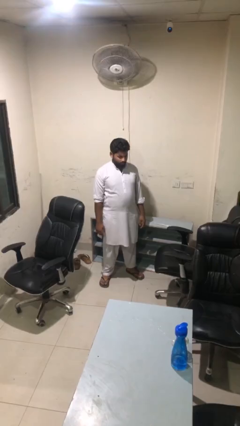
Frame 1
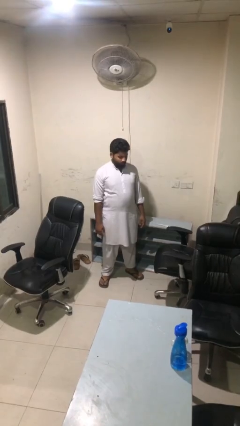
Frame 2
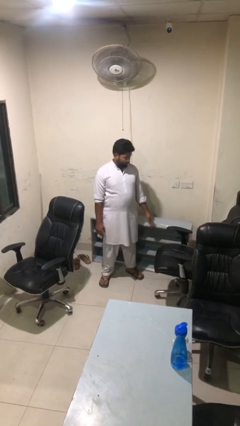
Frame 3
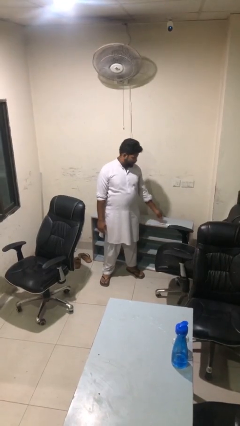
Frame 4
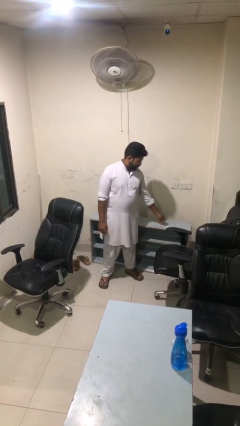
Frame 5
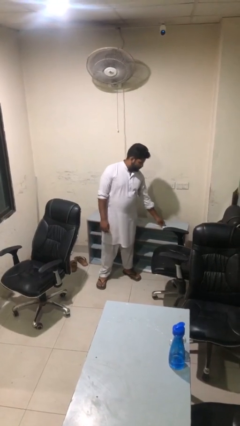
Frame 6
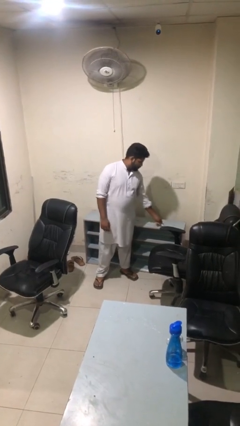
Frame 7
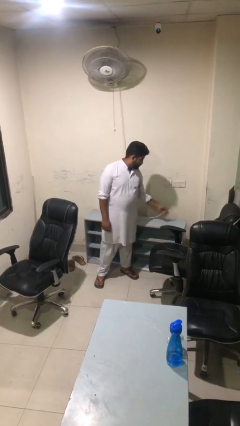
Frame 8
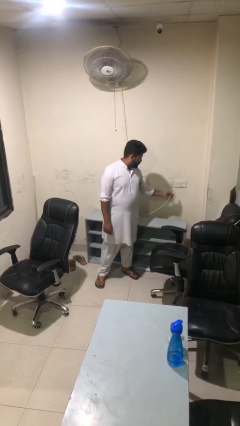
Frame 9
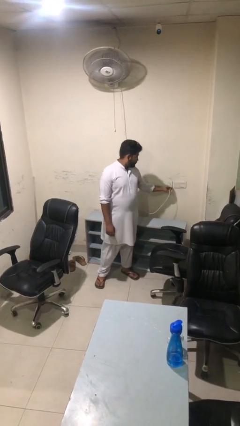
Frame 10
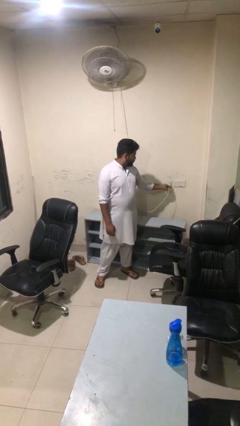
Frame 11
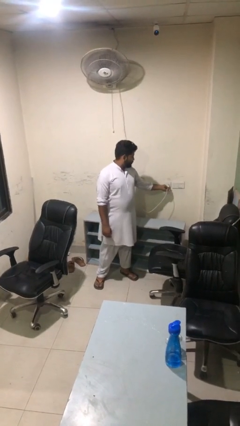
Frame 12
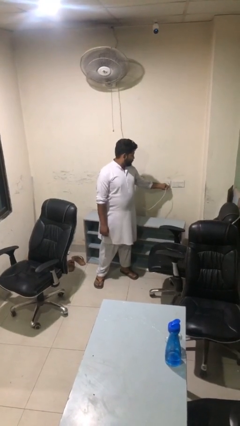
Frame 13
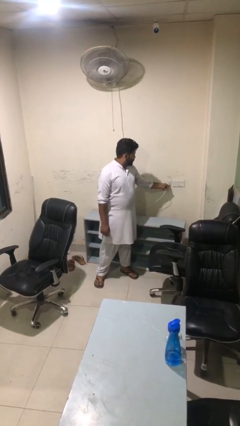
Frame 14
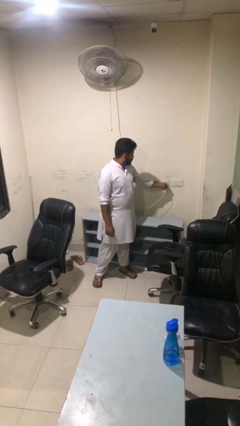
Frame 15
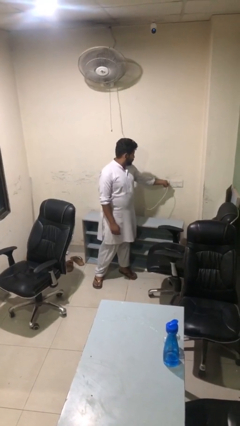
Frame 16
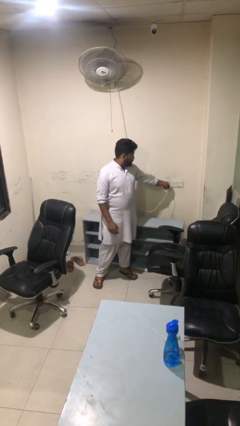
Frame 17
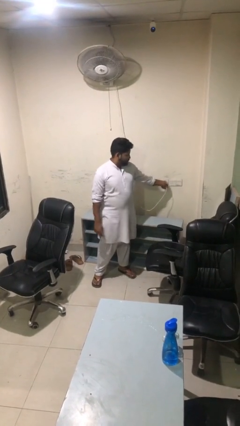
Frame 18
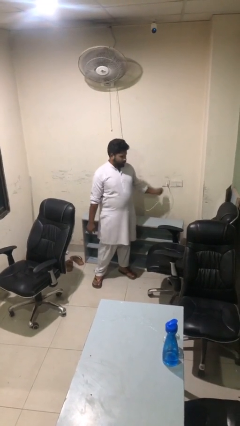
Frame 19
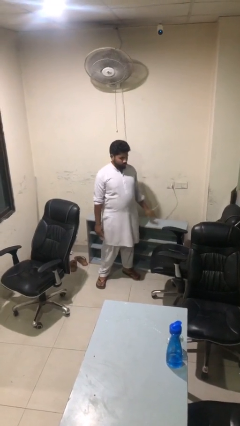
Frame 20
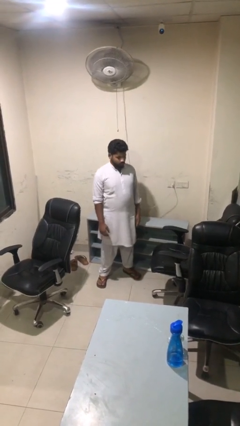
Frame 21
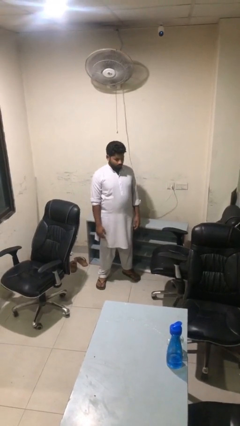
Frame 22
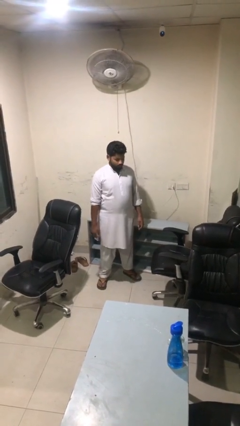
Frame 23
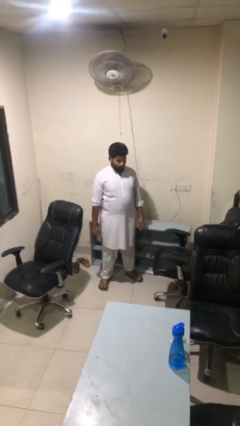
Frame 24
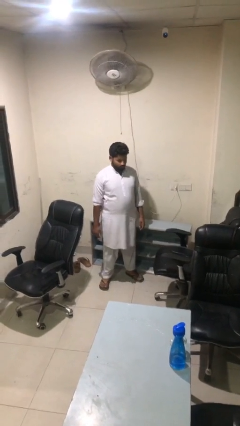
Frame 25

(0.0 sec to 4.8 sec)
person plugs into electrical socket

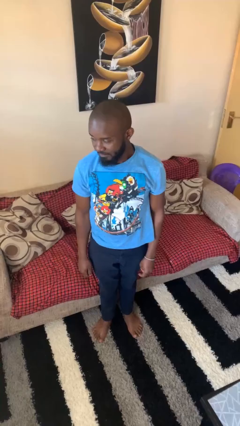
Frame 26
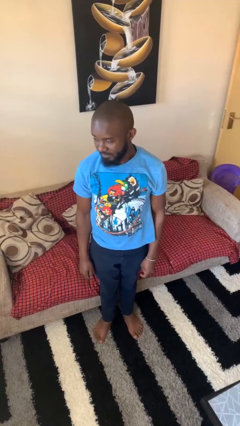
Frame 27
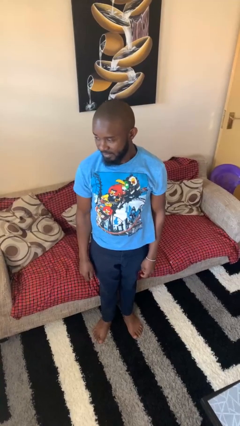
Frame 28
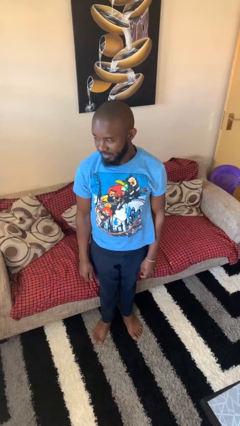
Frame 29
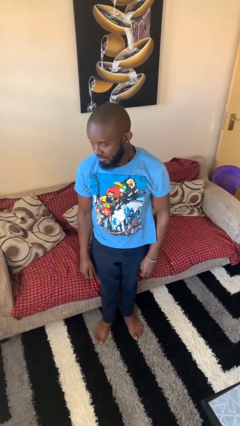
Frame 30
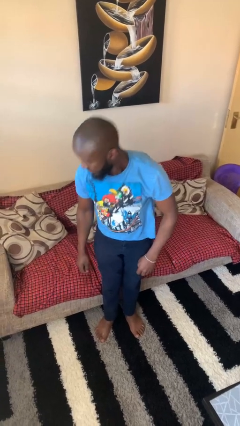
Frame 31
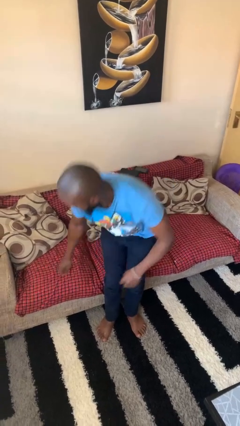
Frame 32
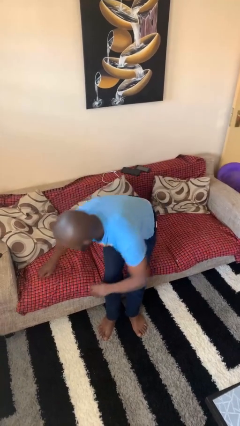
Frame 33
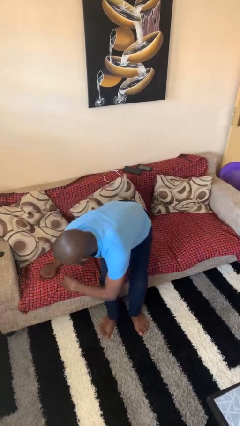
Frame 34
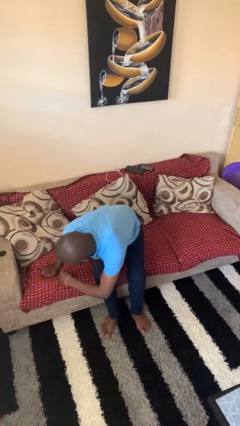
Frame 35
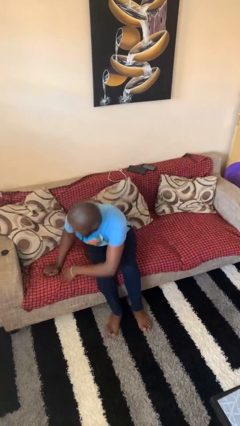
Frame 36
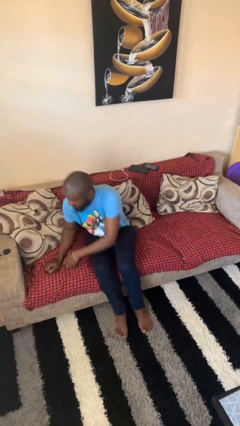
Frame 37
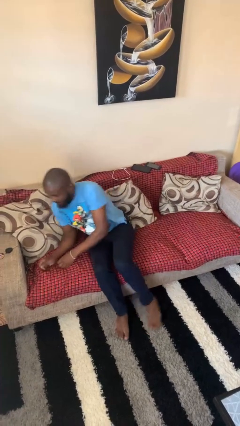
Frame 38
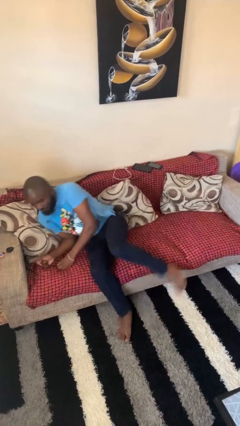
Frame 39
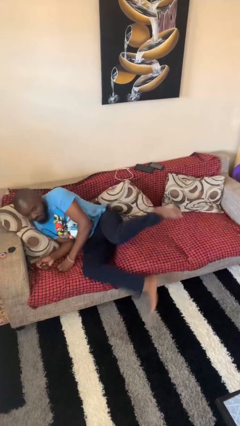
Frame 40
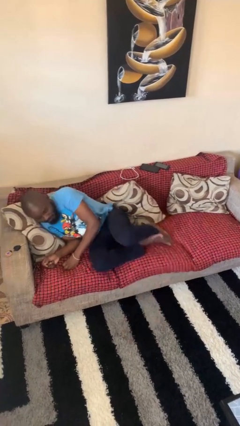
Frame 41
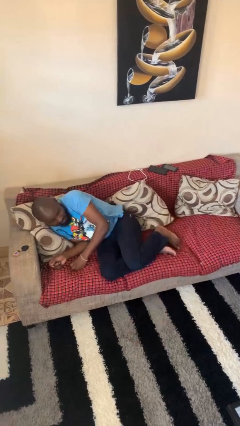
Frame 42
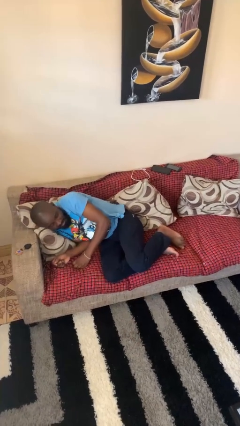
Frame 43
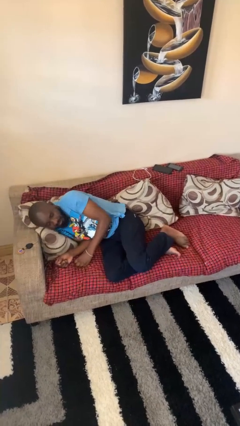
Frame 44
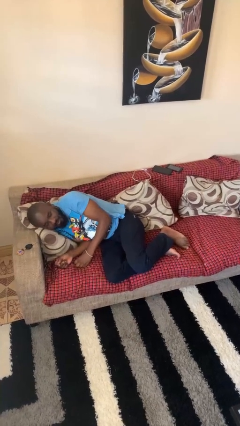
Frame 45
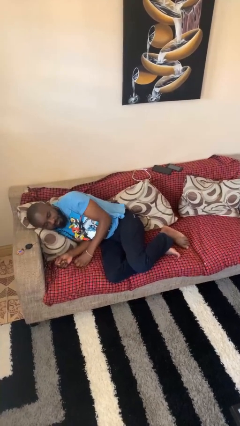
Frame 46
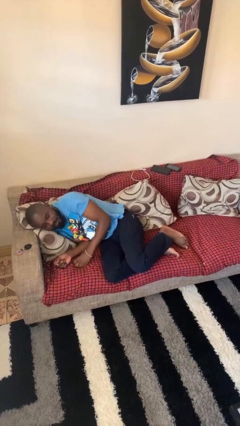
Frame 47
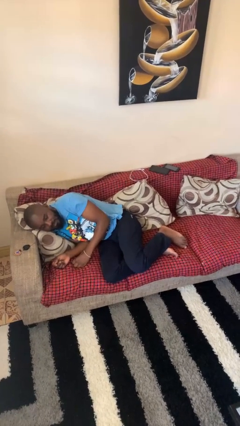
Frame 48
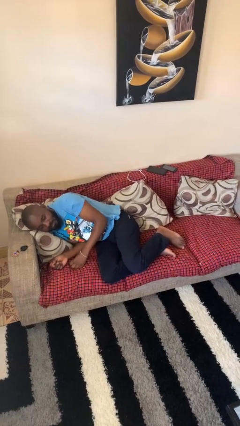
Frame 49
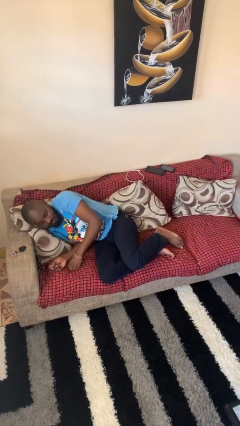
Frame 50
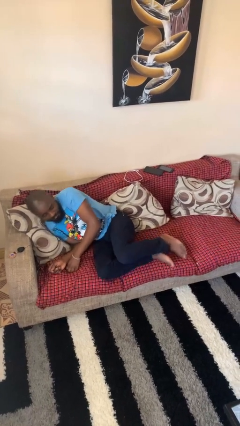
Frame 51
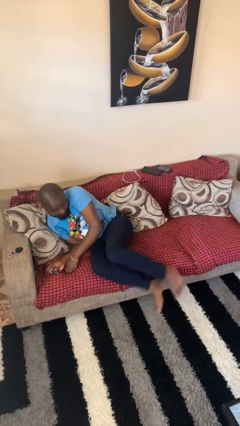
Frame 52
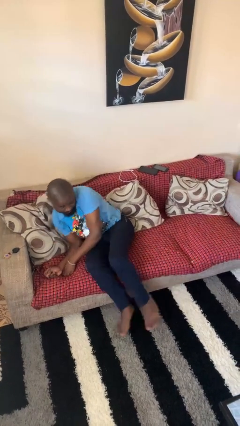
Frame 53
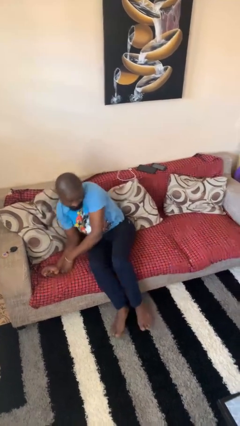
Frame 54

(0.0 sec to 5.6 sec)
person lies down on couch

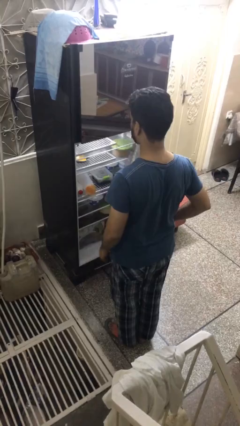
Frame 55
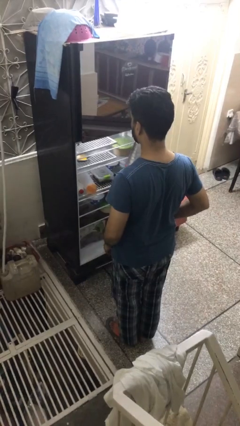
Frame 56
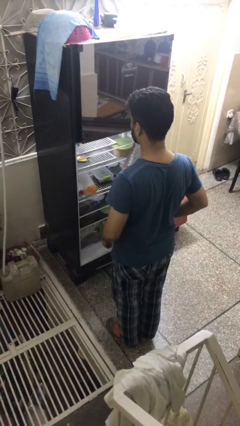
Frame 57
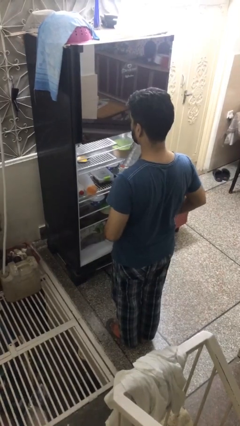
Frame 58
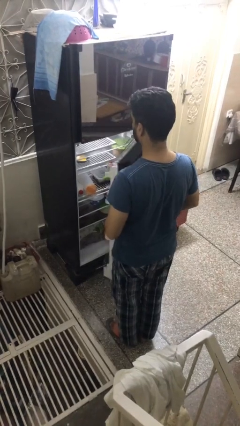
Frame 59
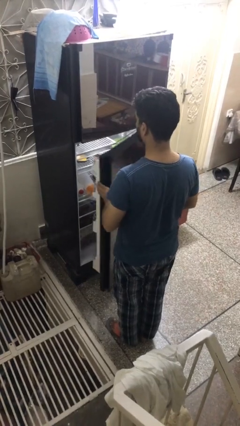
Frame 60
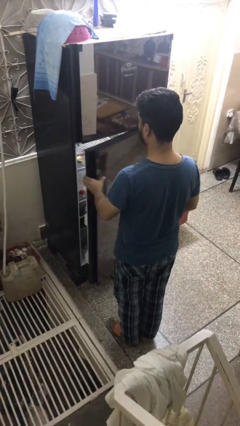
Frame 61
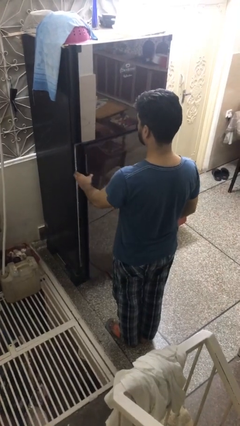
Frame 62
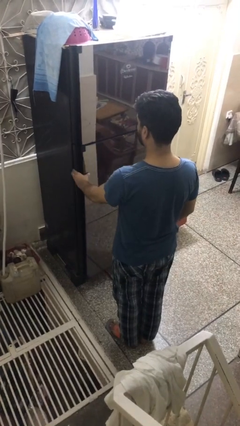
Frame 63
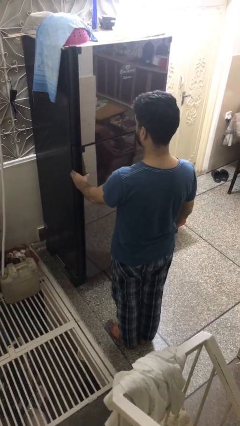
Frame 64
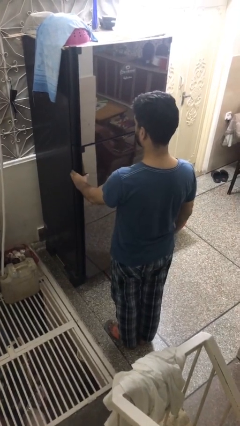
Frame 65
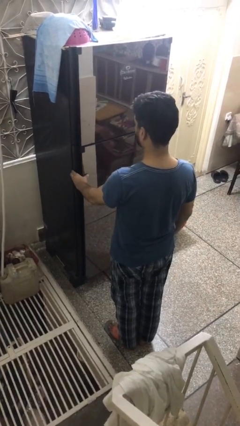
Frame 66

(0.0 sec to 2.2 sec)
person closes refrigerator

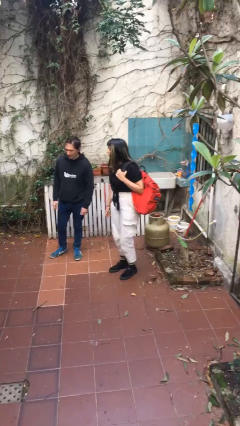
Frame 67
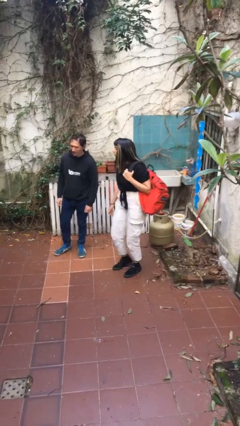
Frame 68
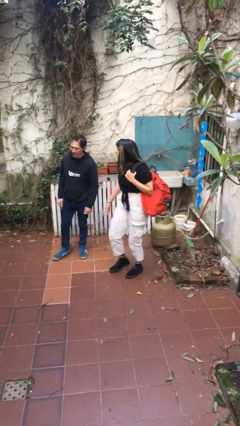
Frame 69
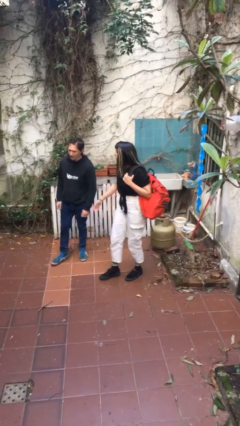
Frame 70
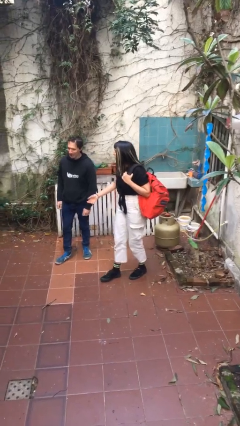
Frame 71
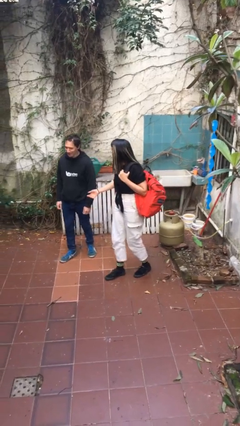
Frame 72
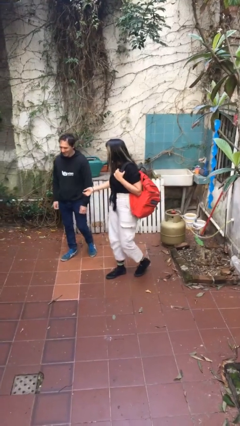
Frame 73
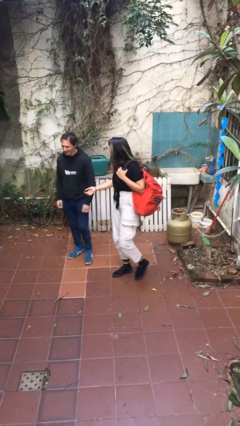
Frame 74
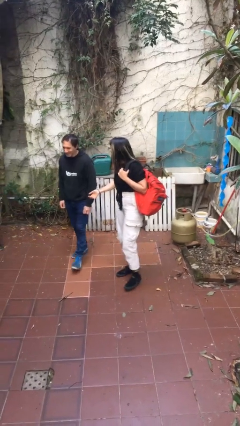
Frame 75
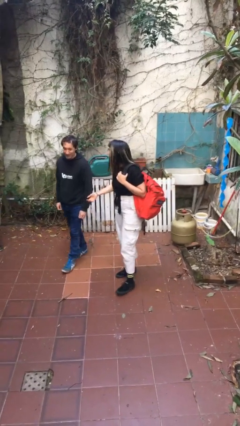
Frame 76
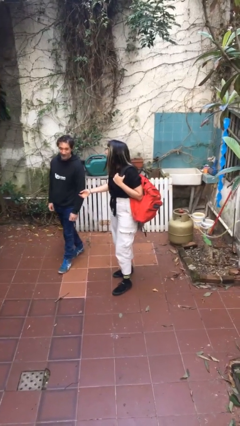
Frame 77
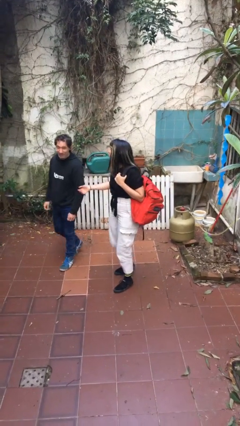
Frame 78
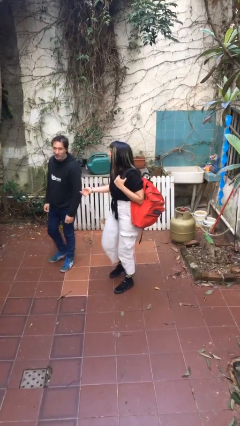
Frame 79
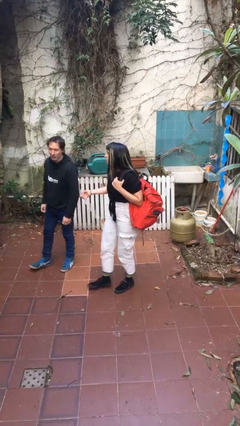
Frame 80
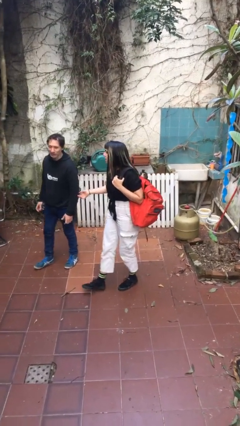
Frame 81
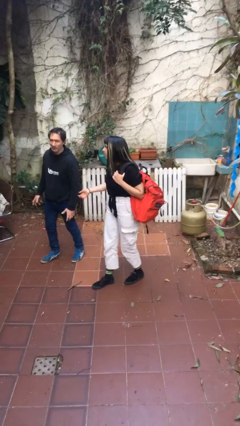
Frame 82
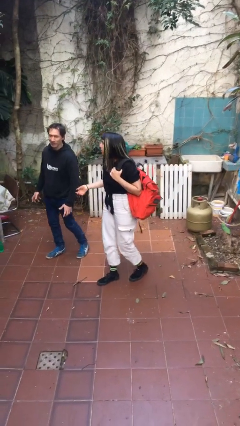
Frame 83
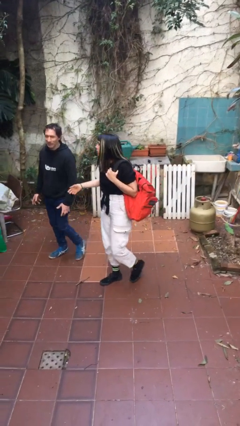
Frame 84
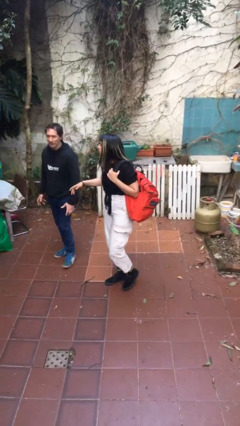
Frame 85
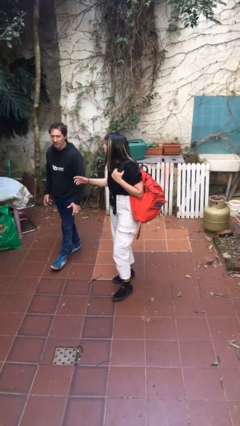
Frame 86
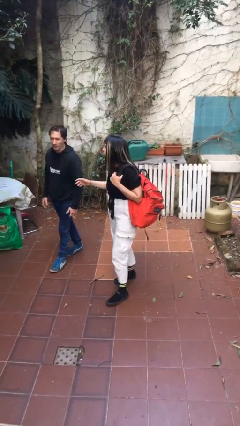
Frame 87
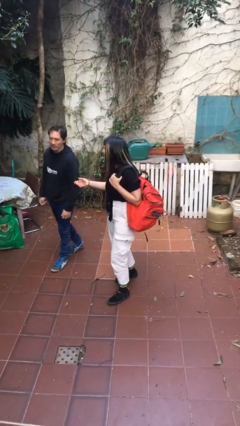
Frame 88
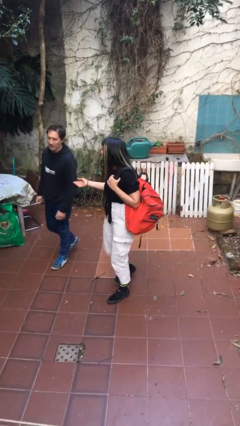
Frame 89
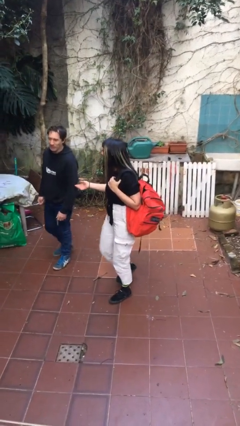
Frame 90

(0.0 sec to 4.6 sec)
person talks to person

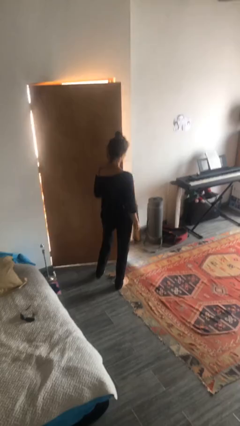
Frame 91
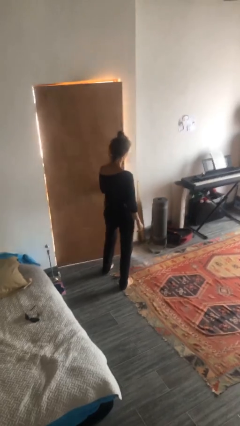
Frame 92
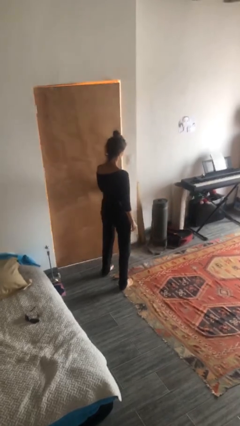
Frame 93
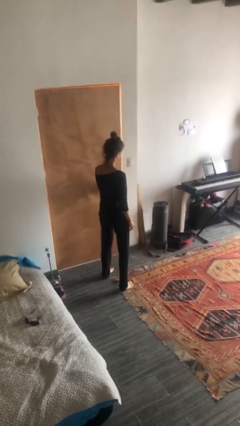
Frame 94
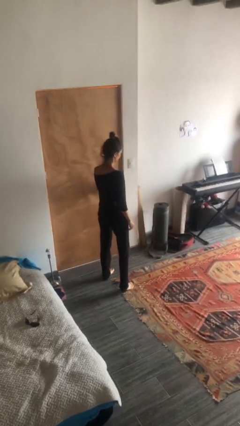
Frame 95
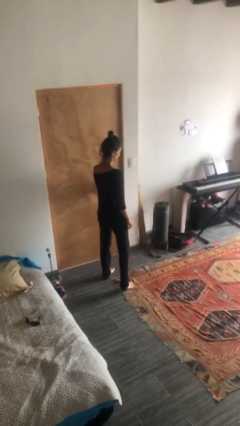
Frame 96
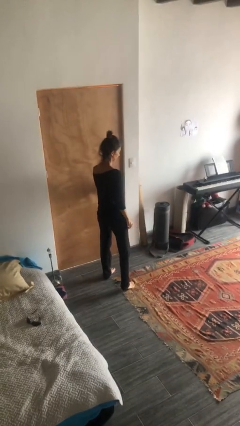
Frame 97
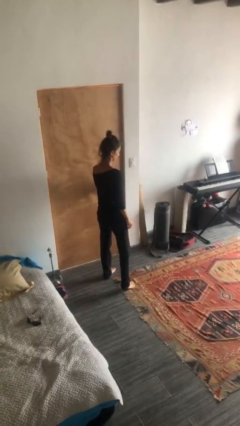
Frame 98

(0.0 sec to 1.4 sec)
person closes facility door
